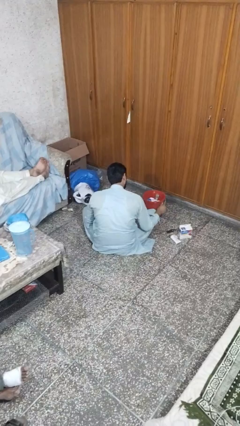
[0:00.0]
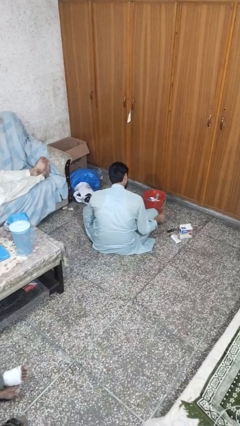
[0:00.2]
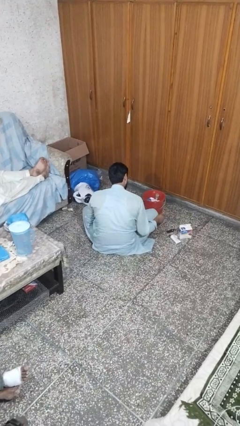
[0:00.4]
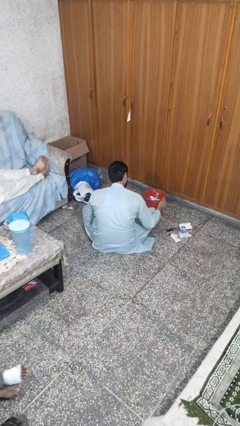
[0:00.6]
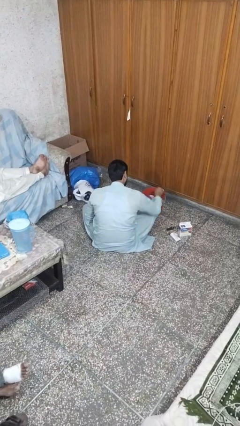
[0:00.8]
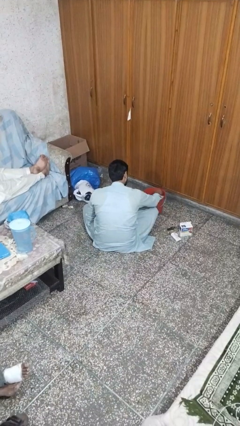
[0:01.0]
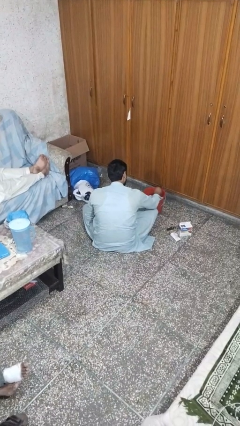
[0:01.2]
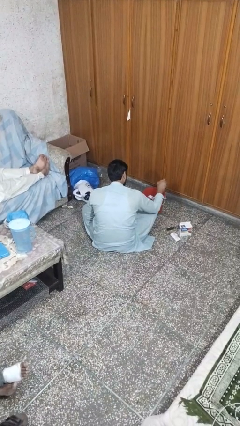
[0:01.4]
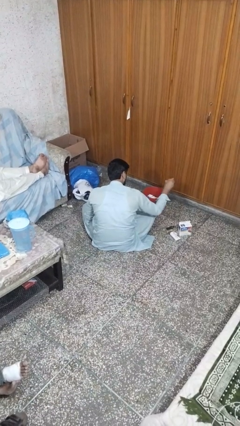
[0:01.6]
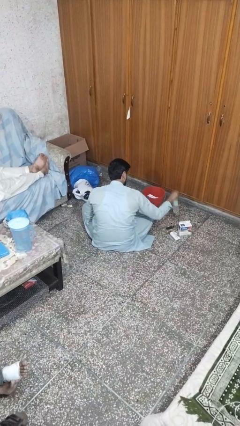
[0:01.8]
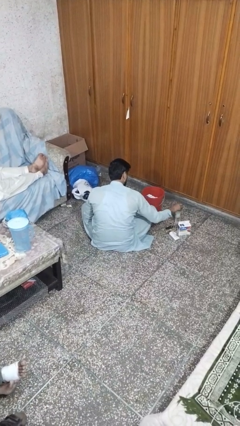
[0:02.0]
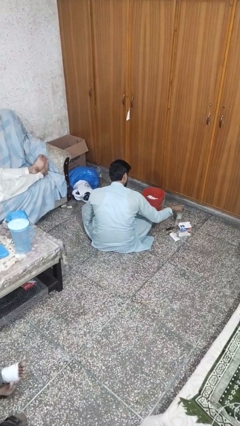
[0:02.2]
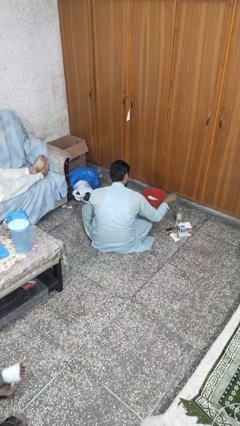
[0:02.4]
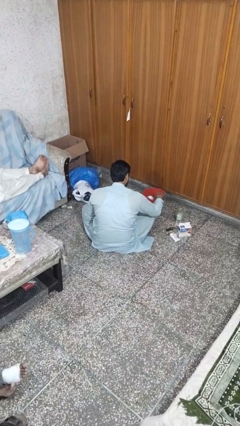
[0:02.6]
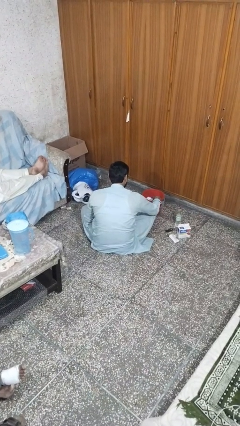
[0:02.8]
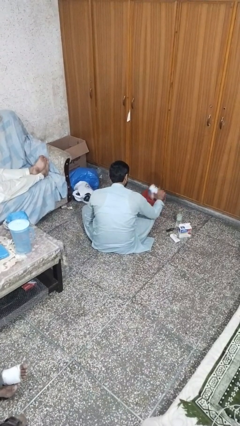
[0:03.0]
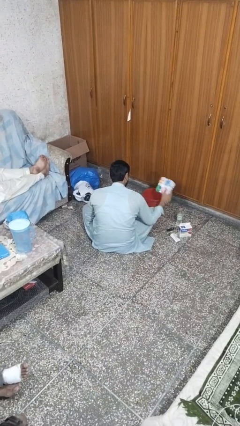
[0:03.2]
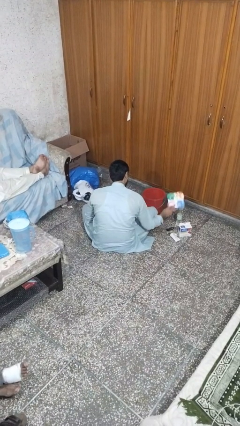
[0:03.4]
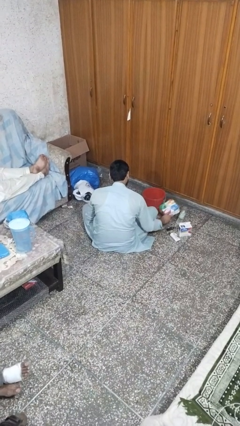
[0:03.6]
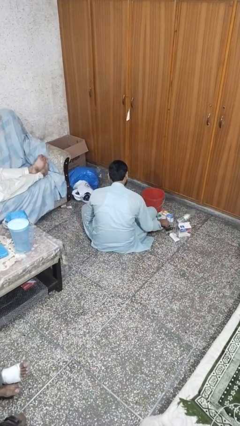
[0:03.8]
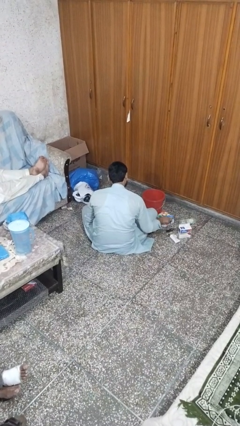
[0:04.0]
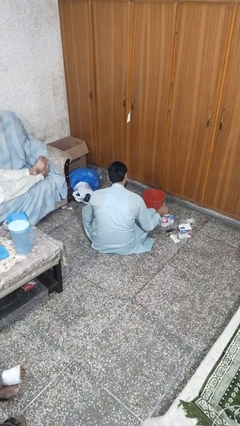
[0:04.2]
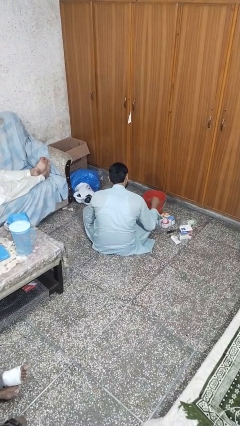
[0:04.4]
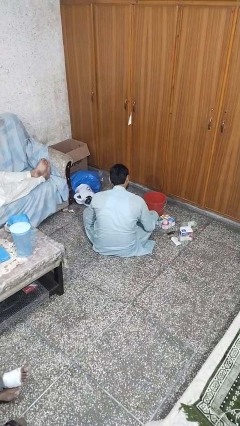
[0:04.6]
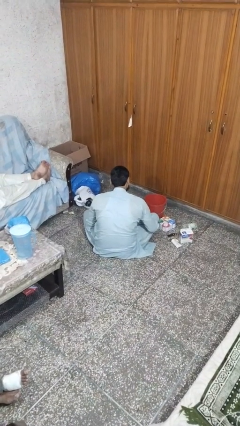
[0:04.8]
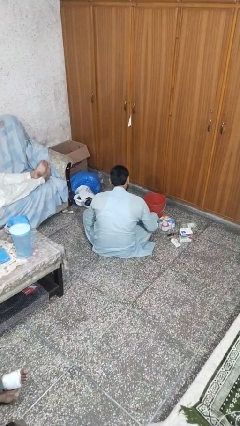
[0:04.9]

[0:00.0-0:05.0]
person takes object from basket

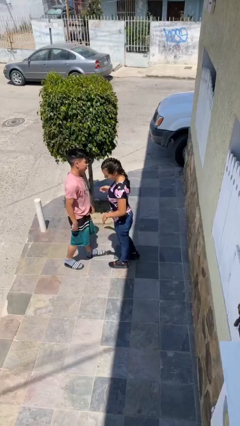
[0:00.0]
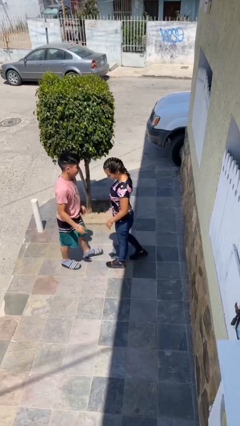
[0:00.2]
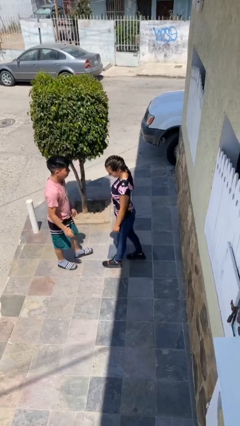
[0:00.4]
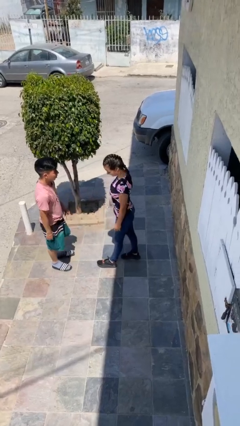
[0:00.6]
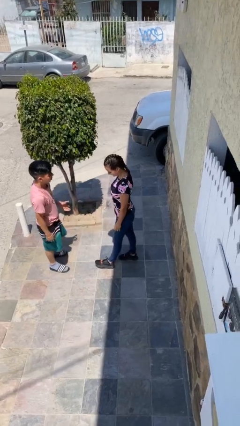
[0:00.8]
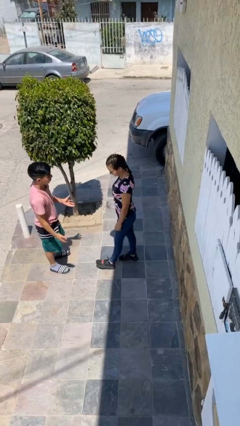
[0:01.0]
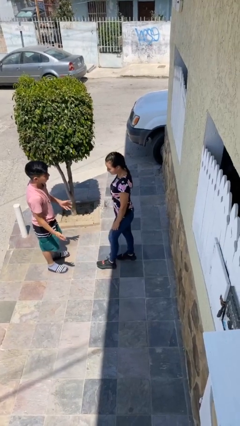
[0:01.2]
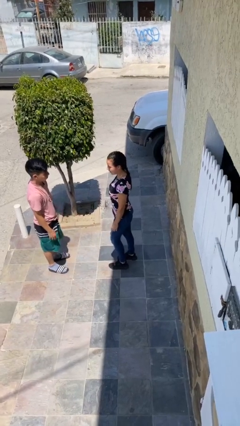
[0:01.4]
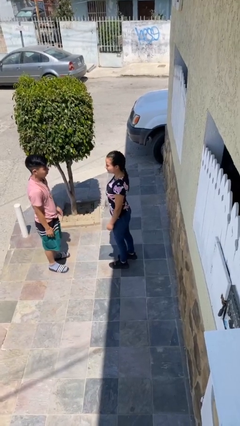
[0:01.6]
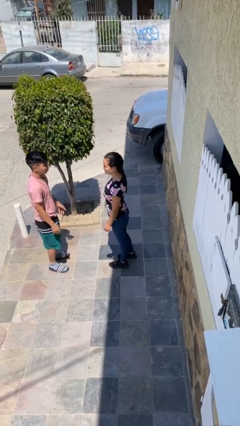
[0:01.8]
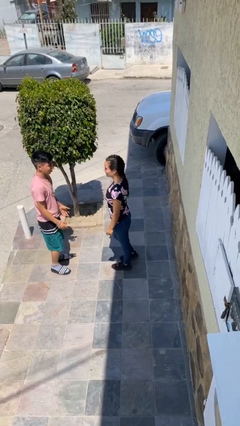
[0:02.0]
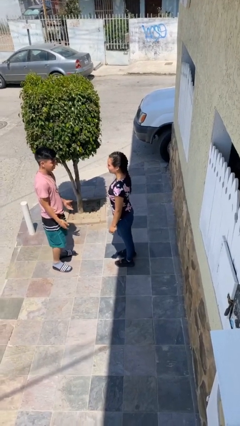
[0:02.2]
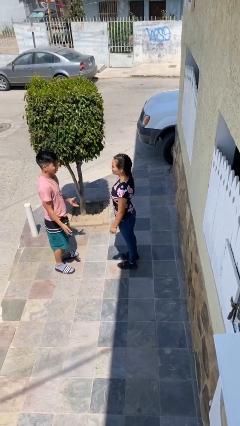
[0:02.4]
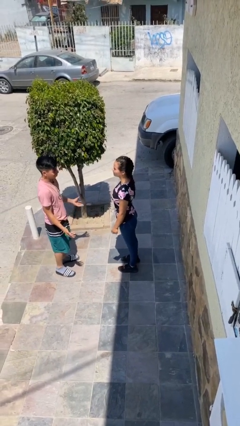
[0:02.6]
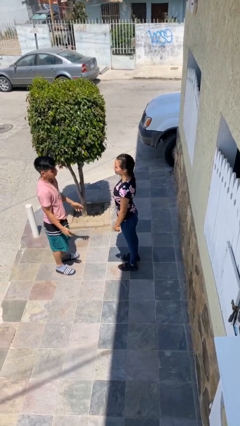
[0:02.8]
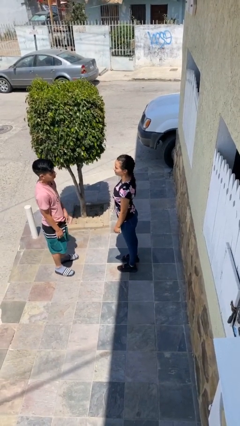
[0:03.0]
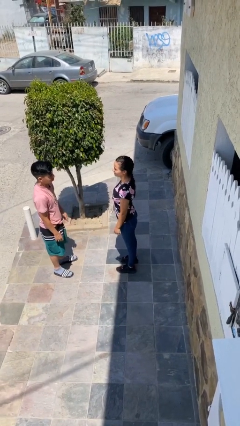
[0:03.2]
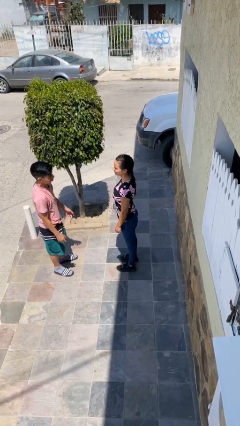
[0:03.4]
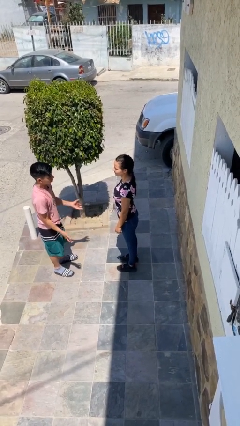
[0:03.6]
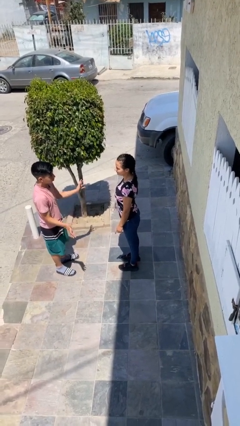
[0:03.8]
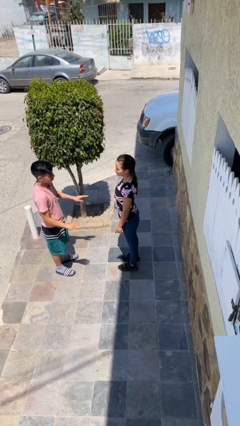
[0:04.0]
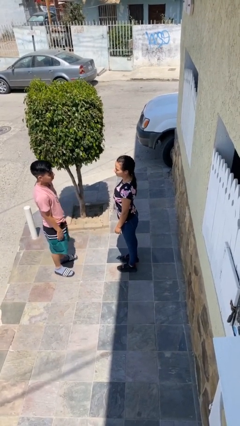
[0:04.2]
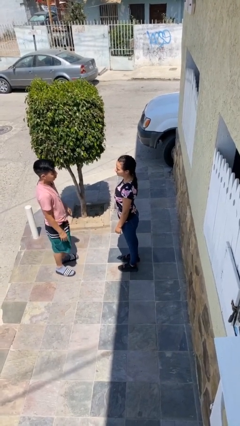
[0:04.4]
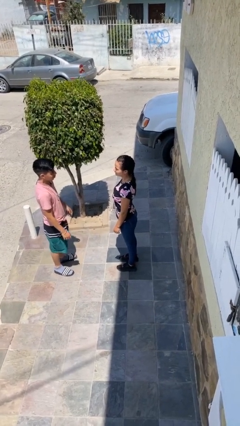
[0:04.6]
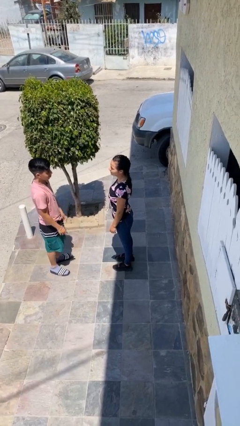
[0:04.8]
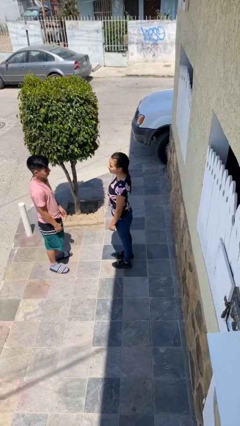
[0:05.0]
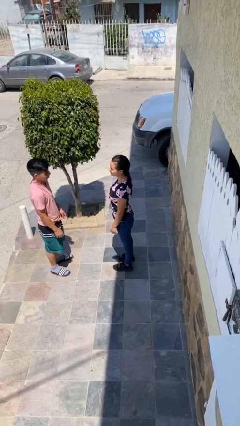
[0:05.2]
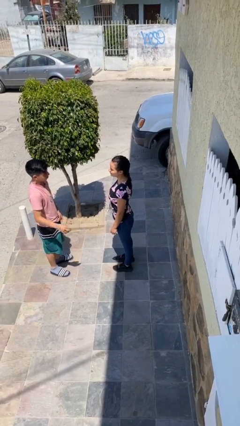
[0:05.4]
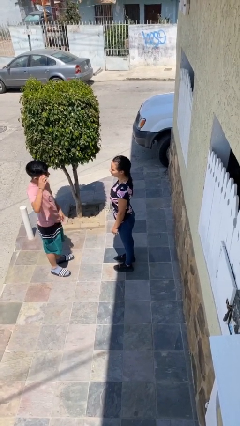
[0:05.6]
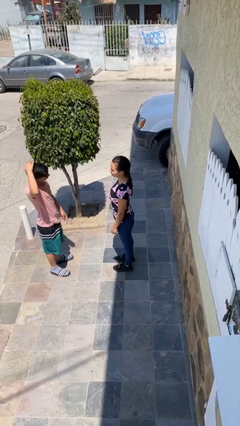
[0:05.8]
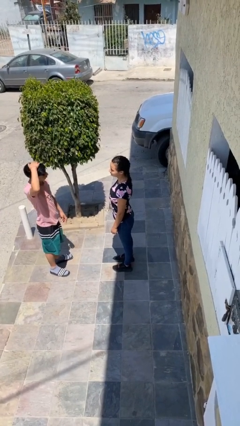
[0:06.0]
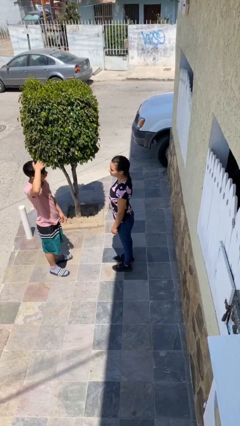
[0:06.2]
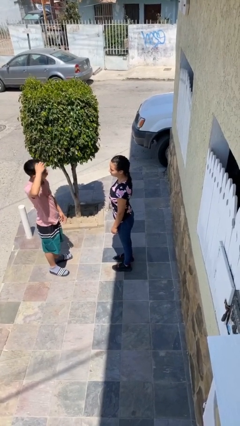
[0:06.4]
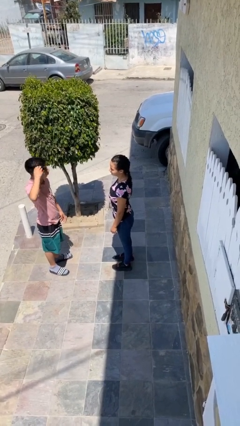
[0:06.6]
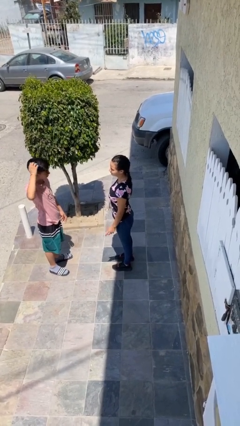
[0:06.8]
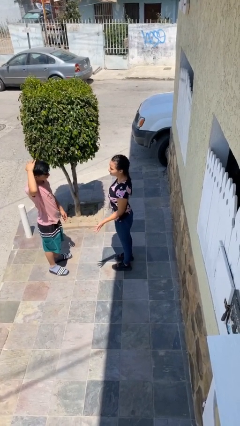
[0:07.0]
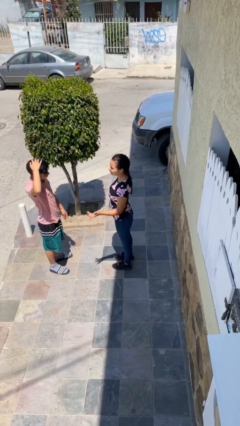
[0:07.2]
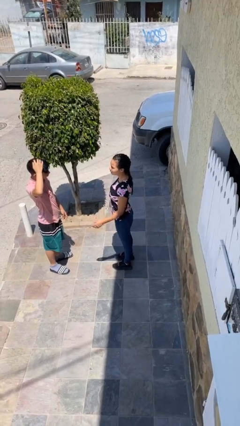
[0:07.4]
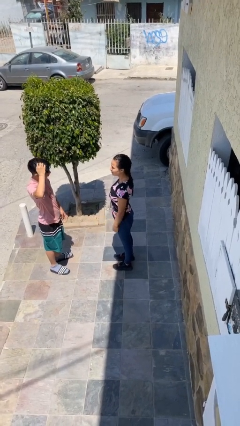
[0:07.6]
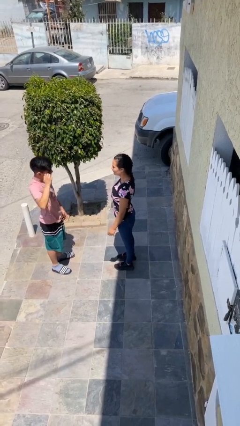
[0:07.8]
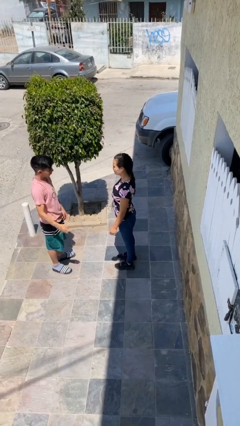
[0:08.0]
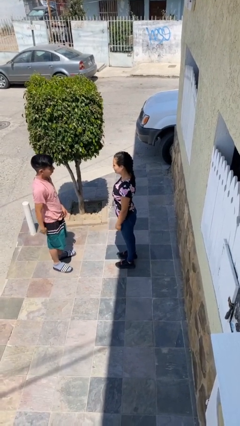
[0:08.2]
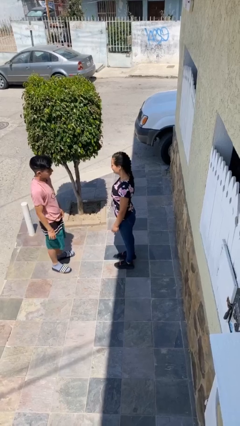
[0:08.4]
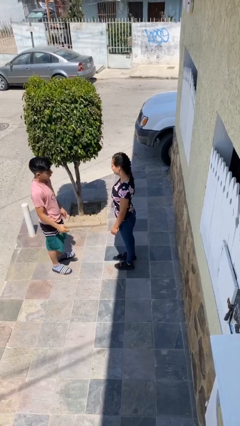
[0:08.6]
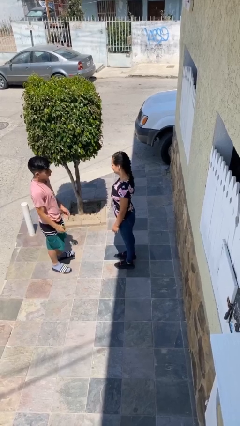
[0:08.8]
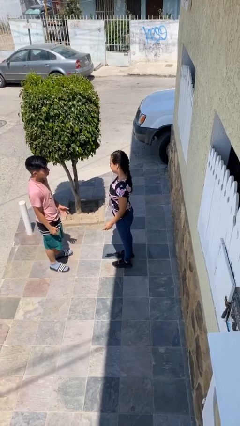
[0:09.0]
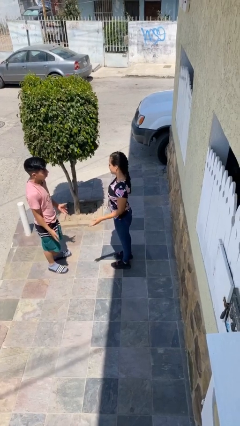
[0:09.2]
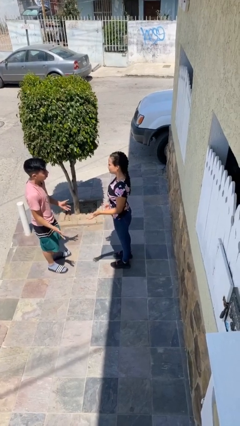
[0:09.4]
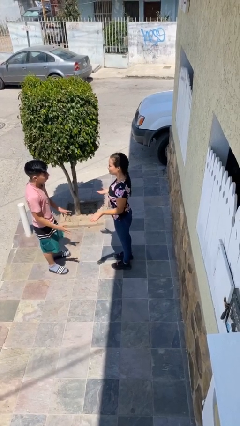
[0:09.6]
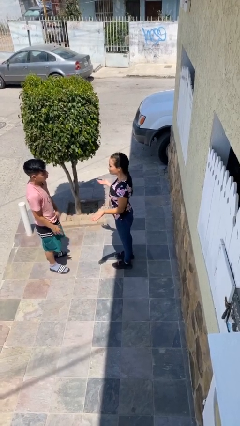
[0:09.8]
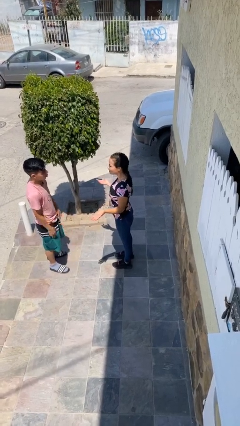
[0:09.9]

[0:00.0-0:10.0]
person talks to person

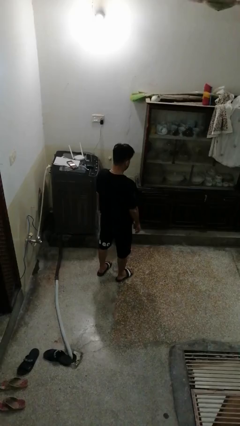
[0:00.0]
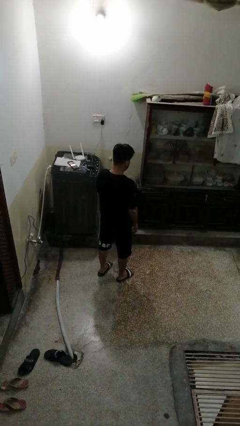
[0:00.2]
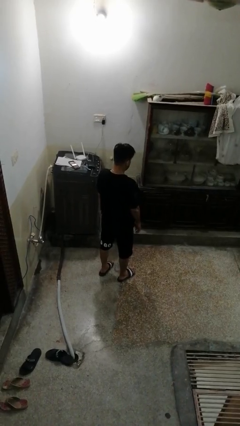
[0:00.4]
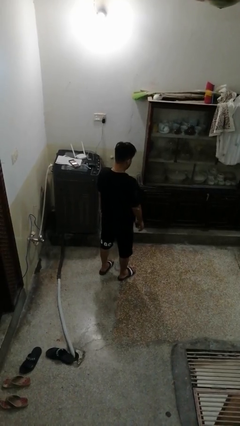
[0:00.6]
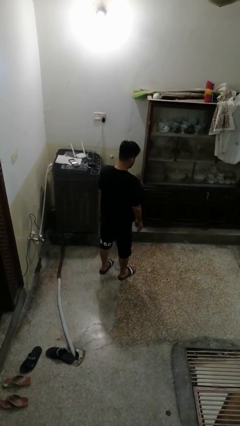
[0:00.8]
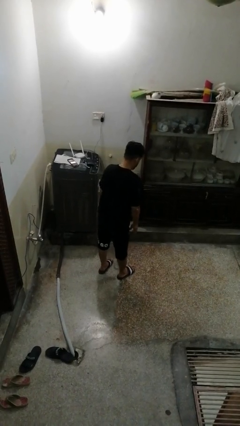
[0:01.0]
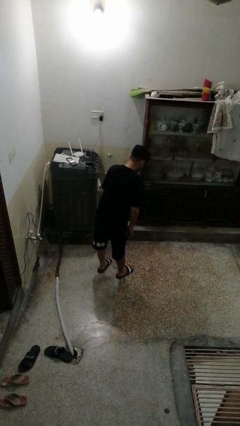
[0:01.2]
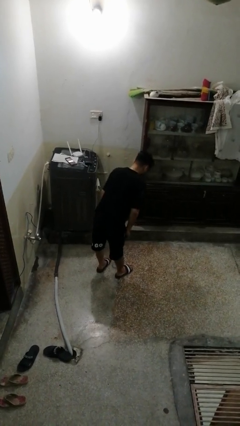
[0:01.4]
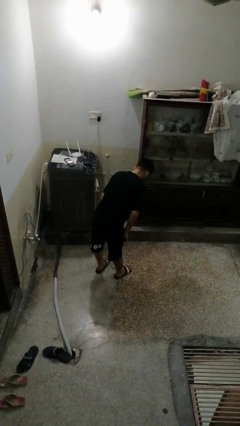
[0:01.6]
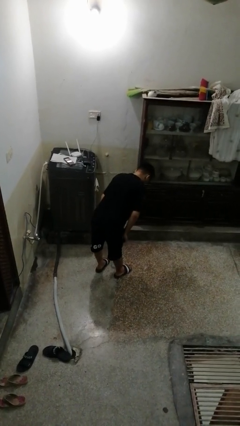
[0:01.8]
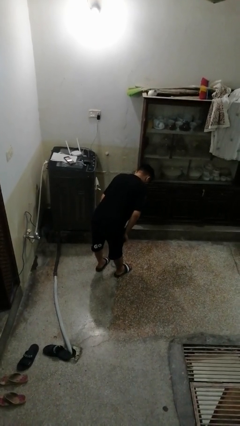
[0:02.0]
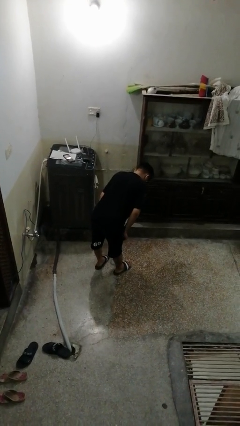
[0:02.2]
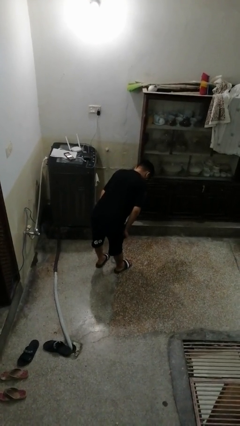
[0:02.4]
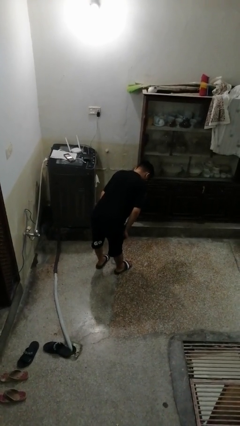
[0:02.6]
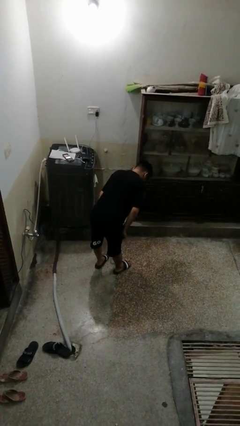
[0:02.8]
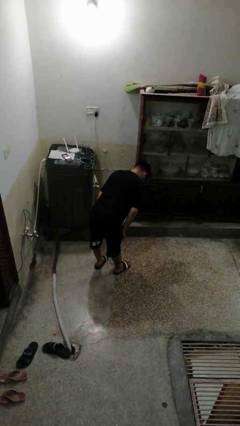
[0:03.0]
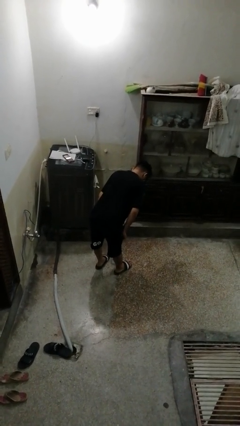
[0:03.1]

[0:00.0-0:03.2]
person bows
